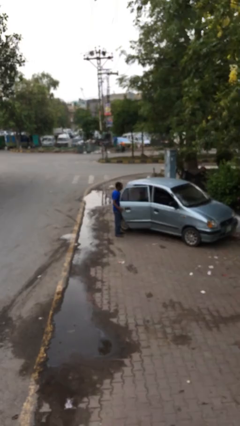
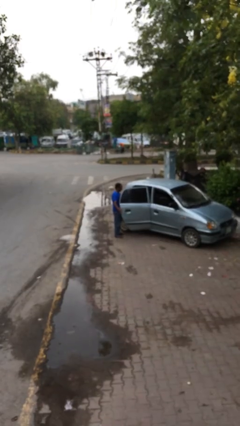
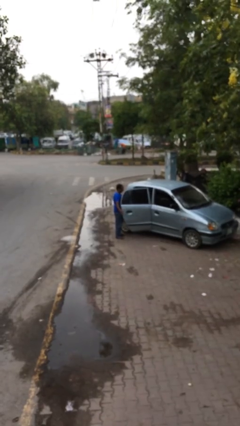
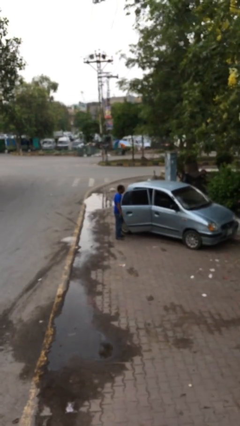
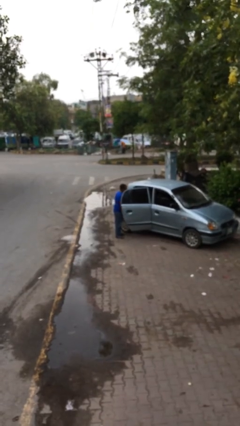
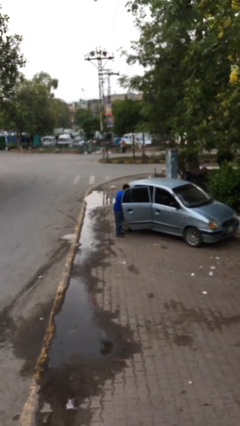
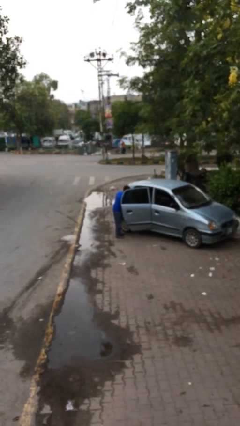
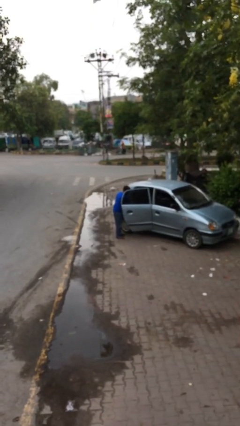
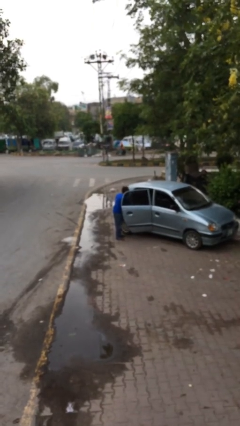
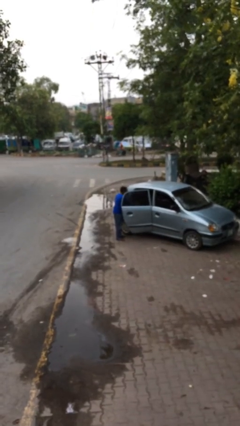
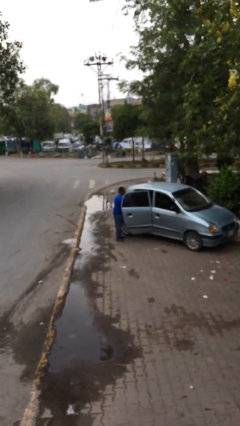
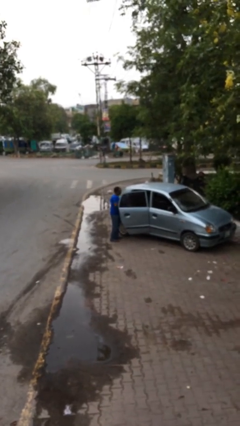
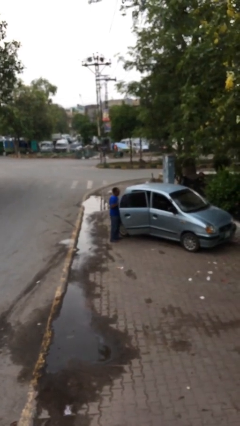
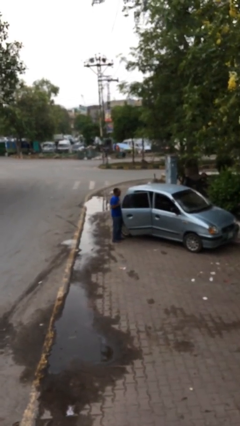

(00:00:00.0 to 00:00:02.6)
person unloads car

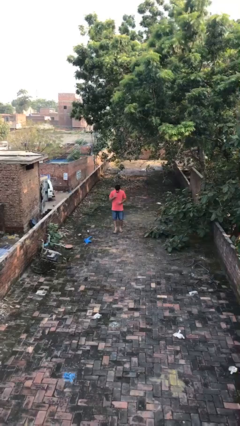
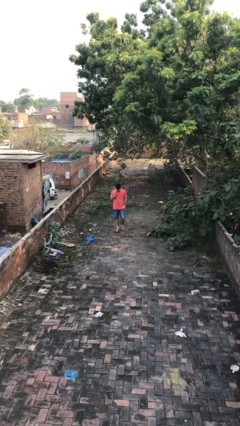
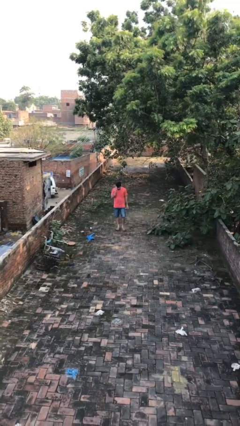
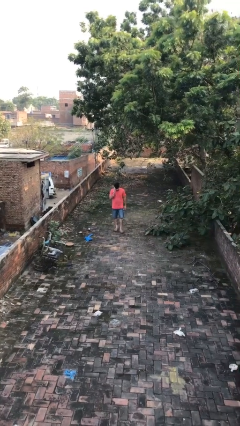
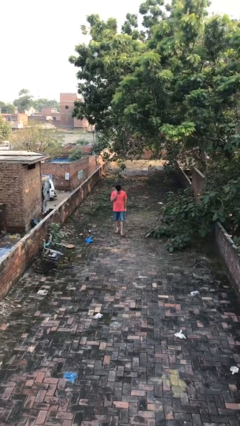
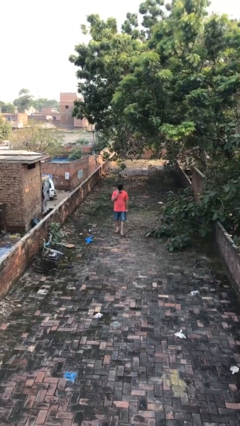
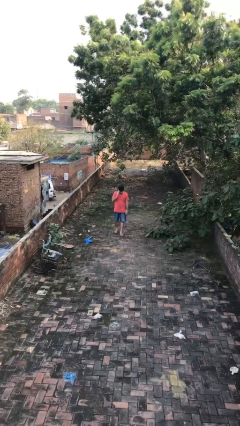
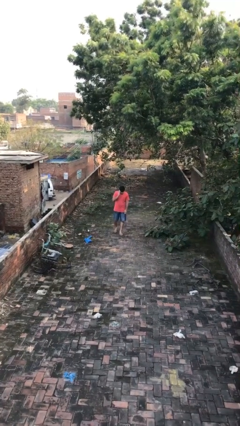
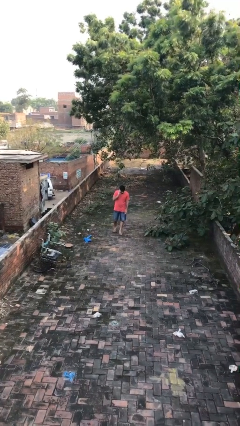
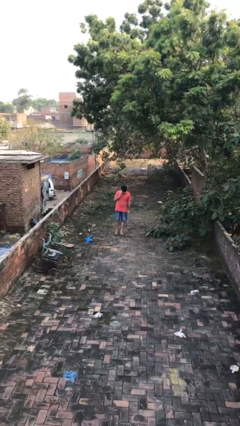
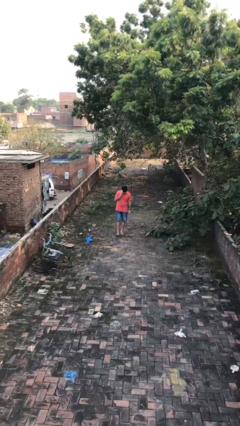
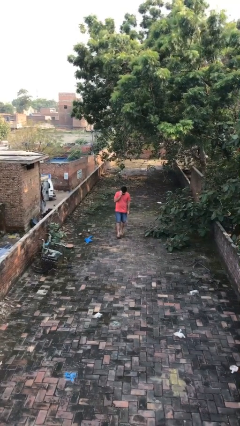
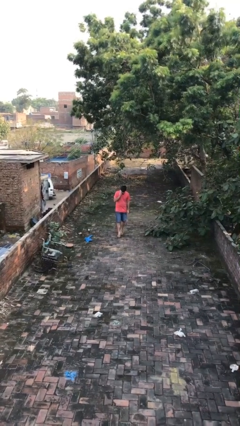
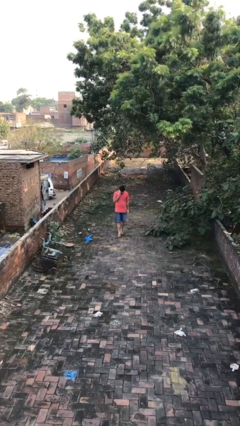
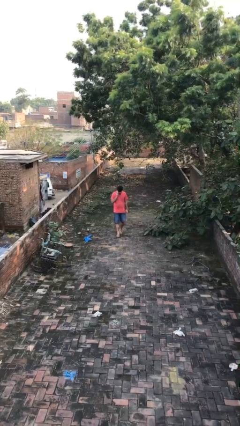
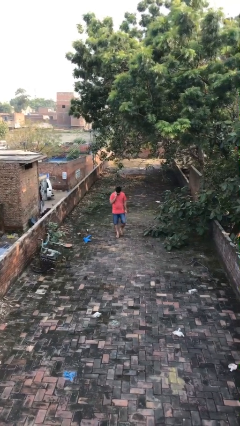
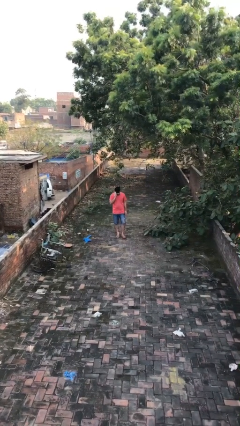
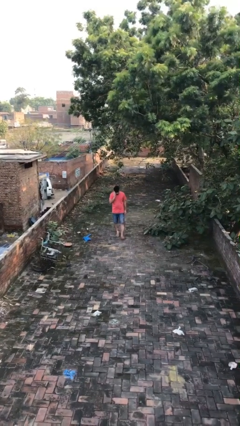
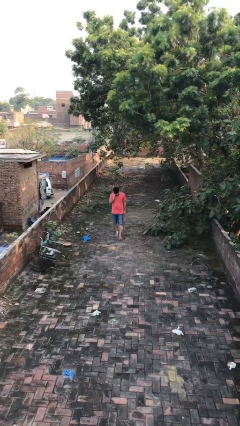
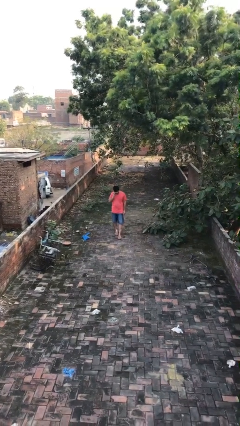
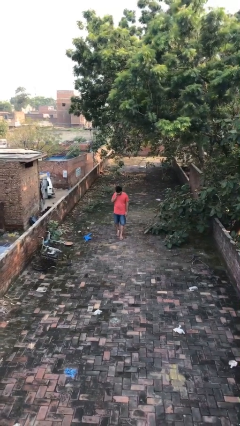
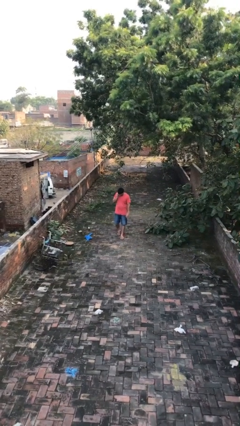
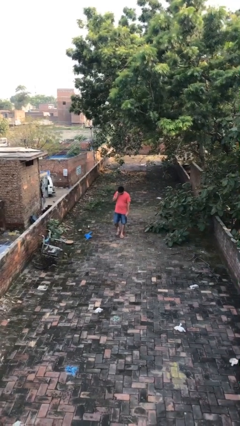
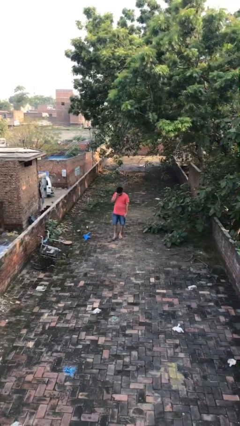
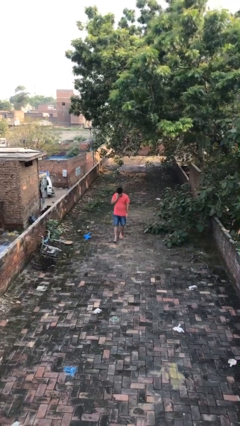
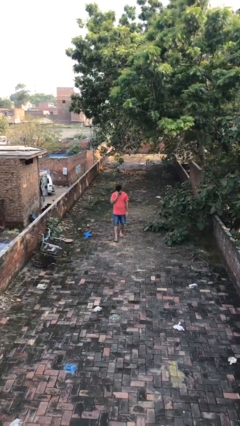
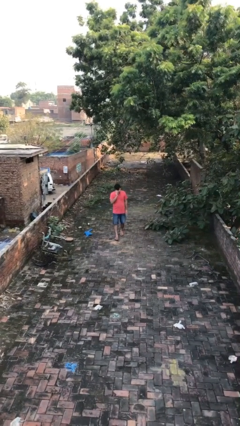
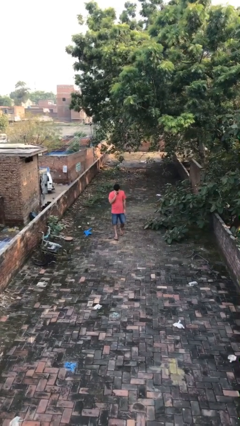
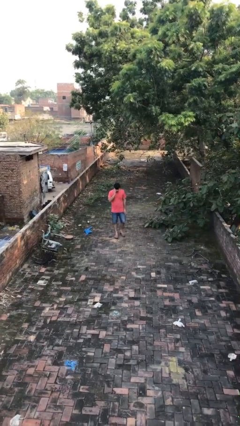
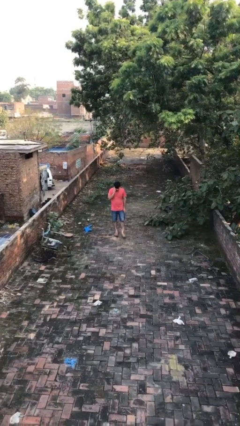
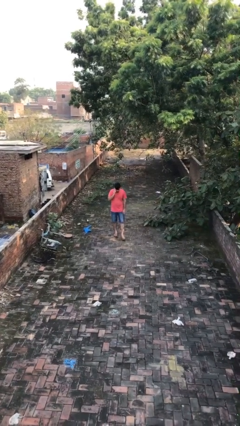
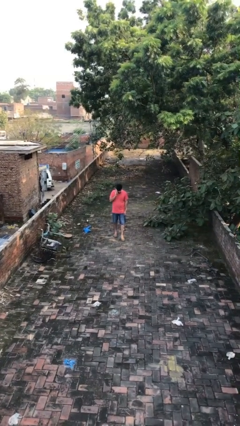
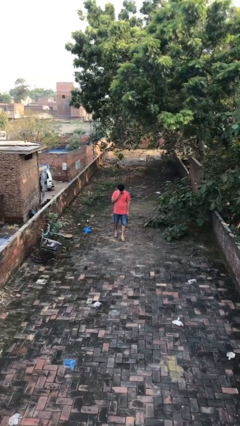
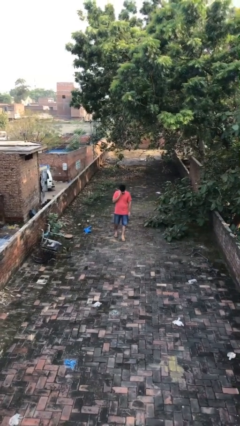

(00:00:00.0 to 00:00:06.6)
person talks on phone

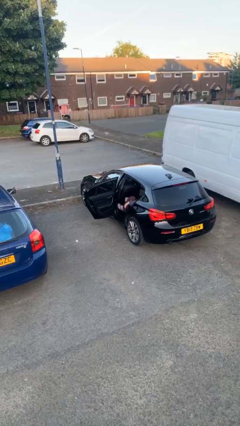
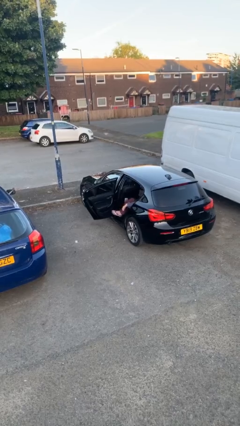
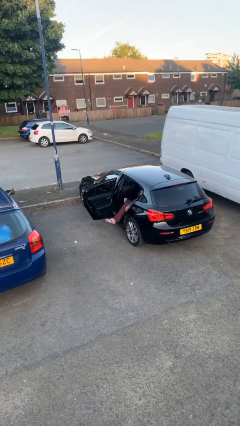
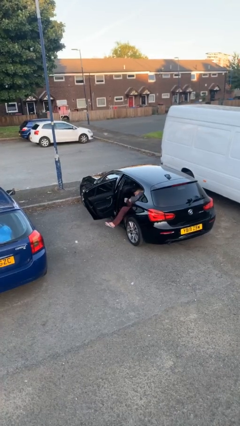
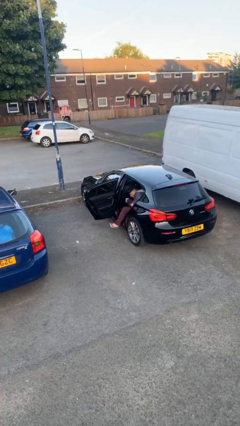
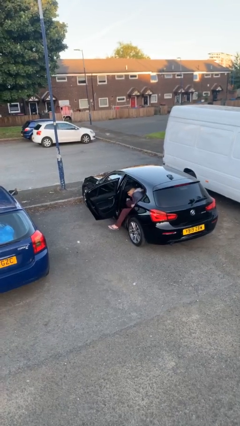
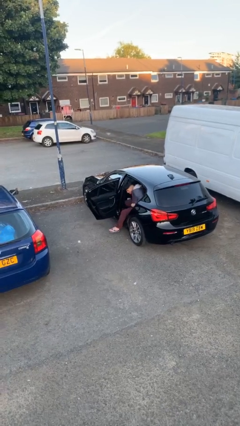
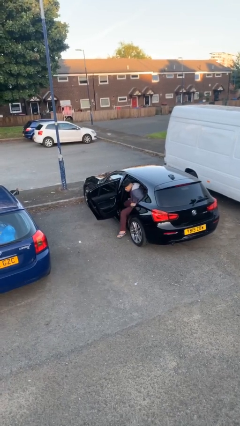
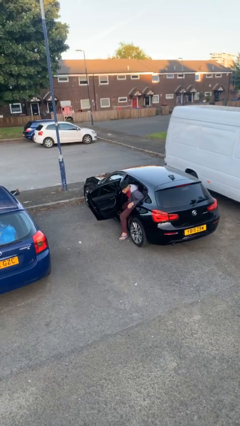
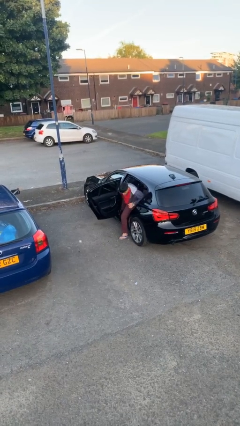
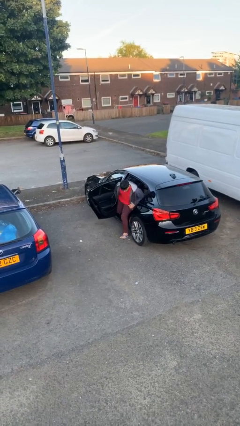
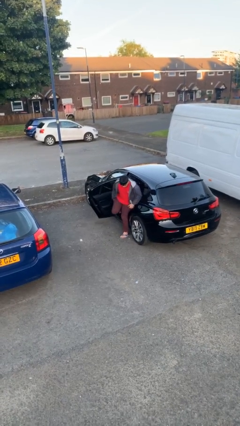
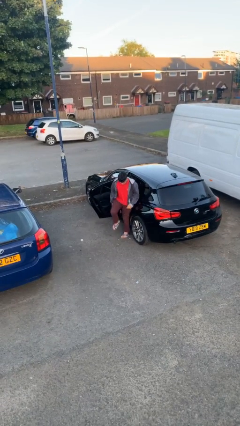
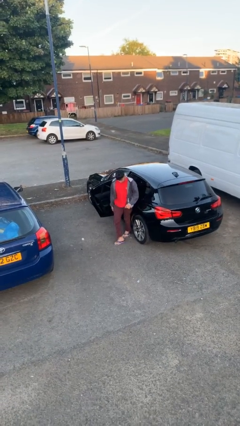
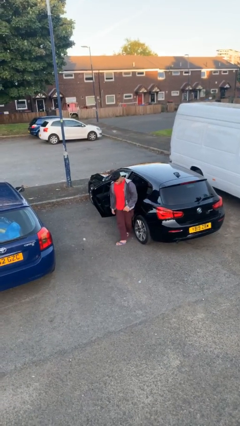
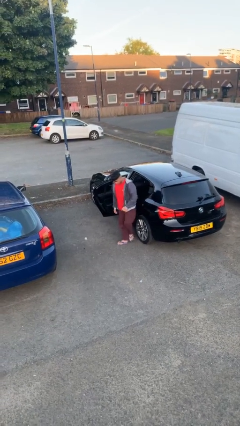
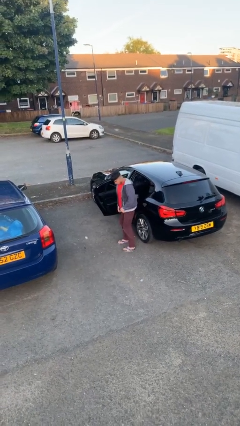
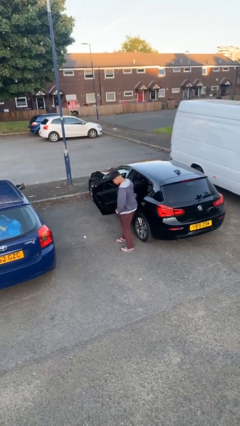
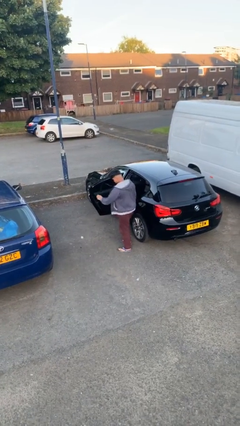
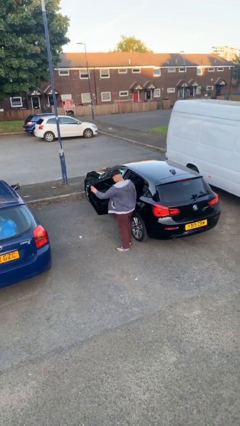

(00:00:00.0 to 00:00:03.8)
person exits car

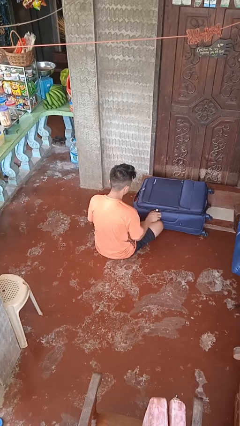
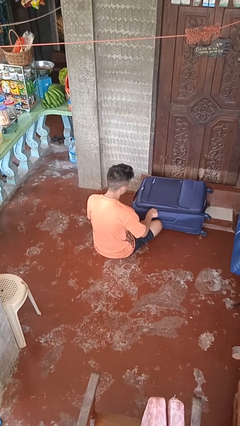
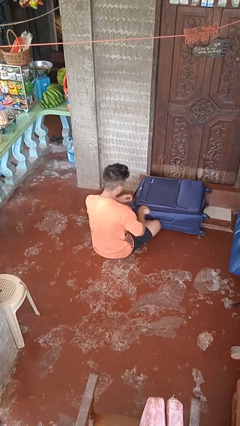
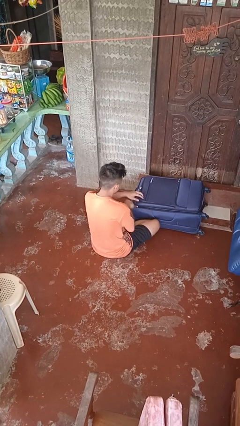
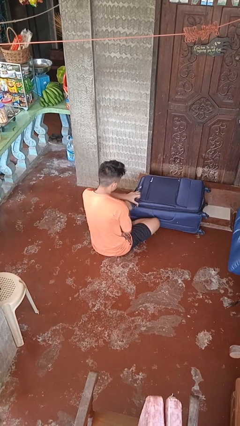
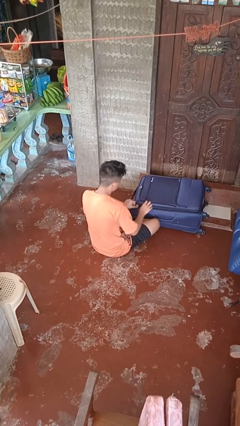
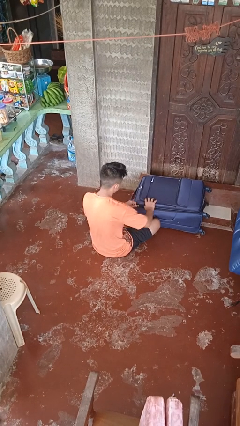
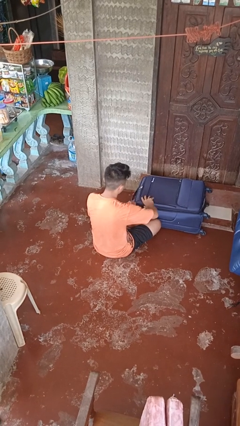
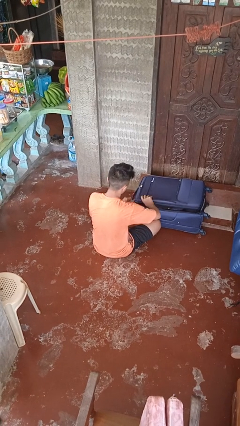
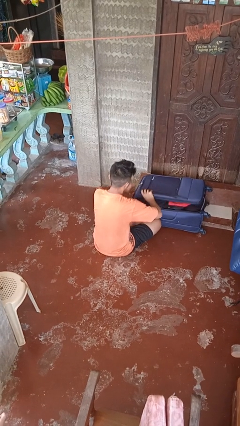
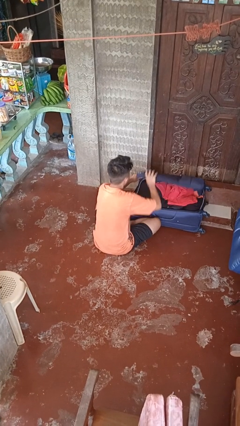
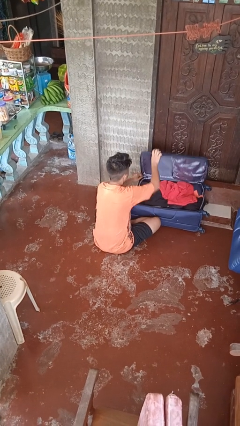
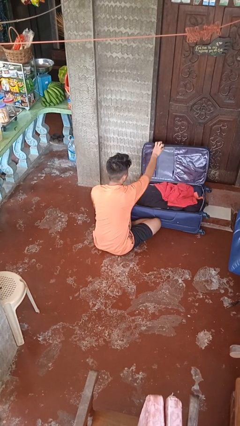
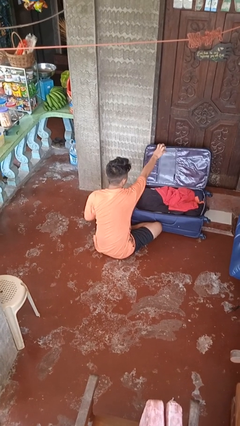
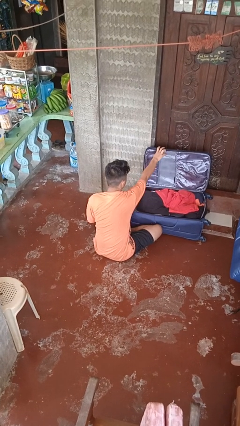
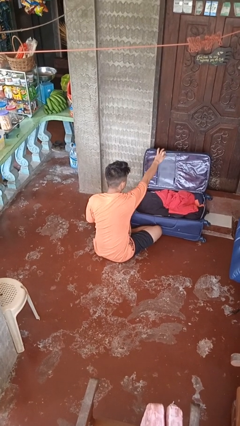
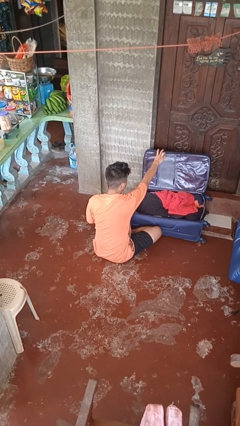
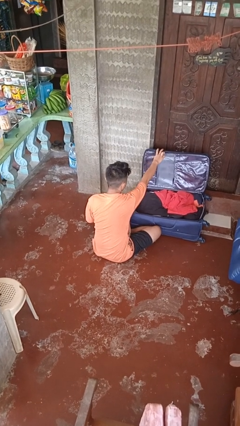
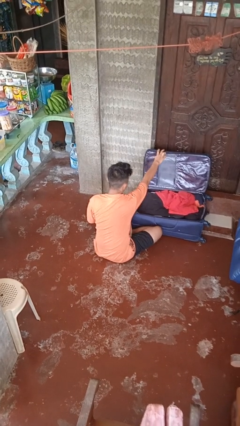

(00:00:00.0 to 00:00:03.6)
person opens suitcase

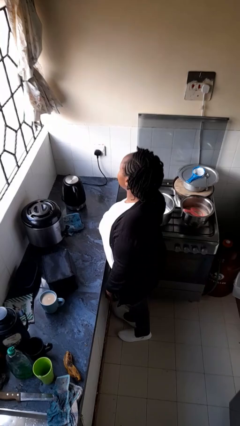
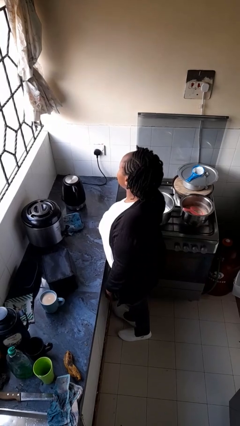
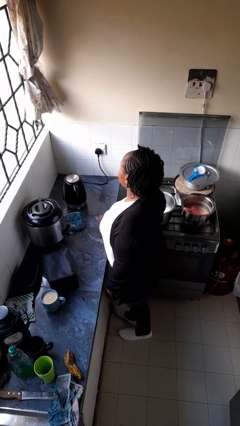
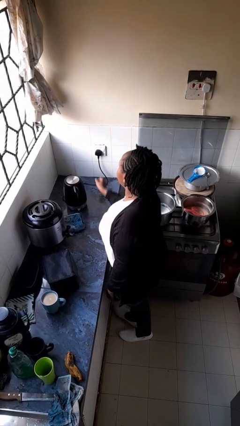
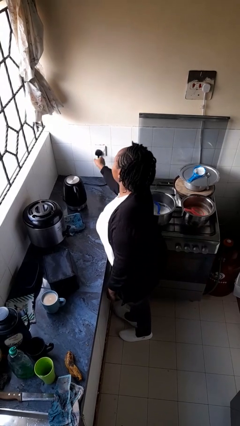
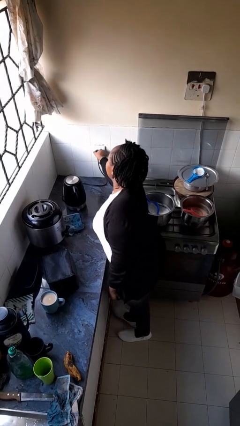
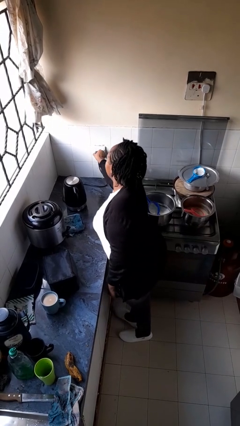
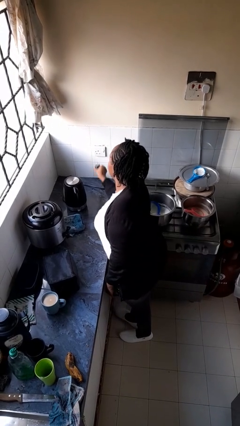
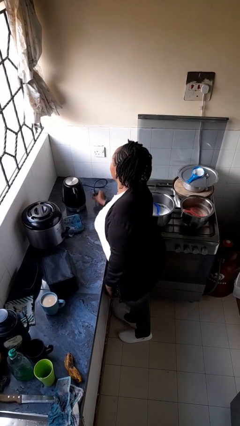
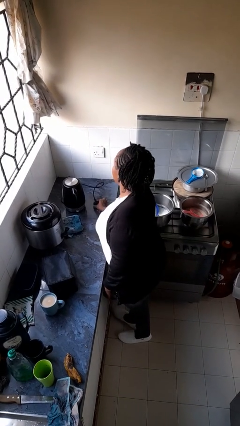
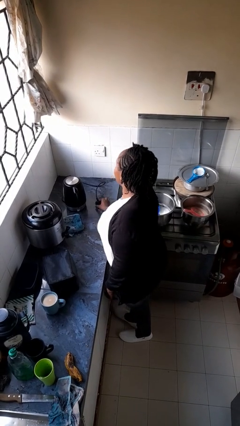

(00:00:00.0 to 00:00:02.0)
person unplugs from electrical socket
